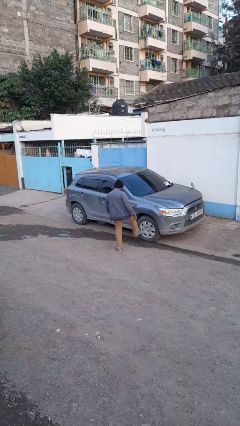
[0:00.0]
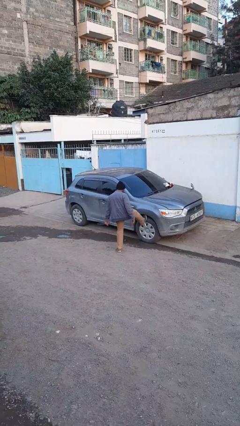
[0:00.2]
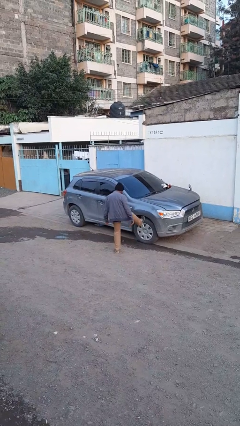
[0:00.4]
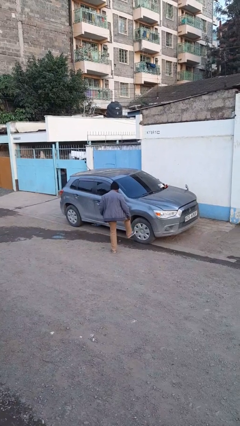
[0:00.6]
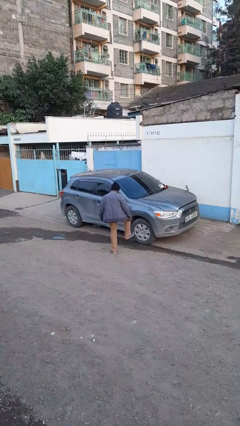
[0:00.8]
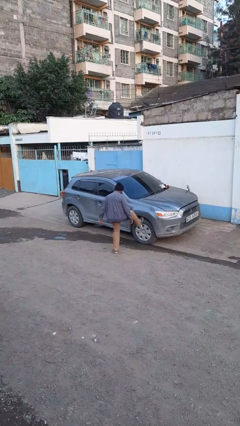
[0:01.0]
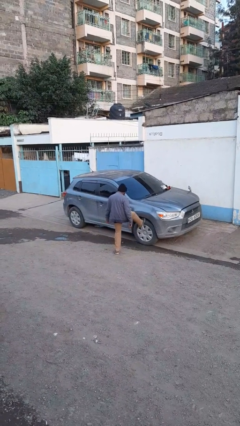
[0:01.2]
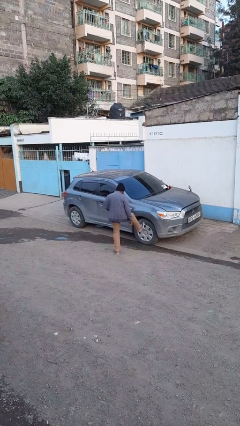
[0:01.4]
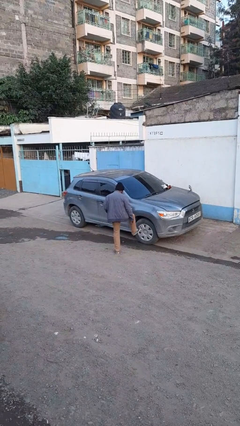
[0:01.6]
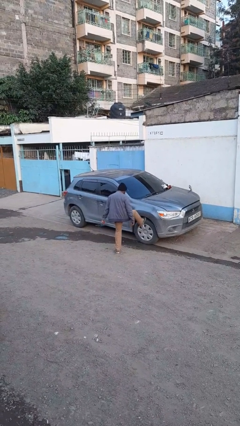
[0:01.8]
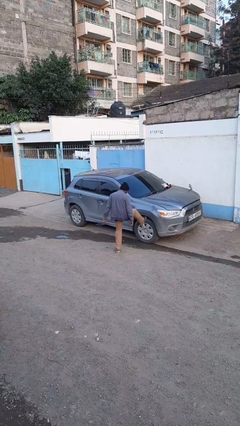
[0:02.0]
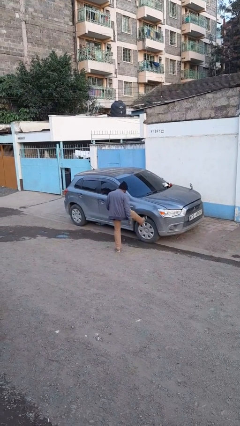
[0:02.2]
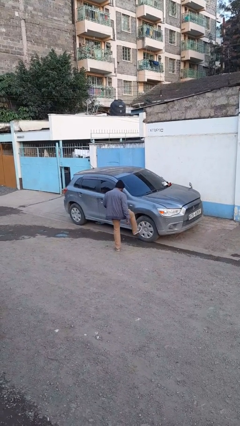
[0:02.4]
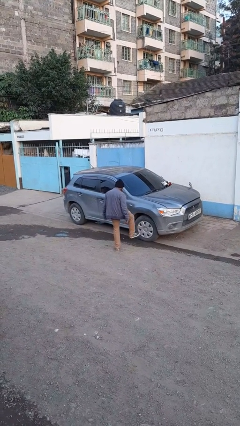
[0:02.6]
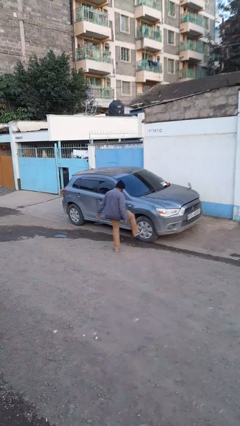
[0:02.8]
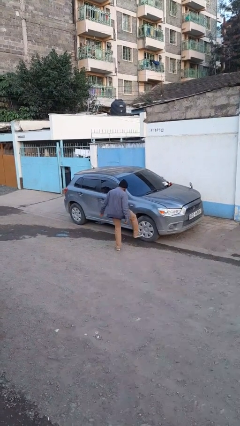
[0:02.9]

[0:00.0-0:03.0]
person kicks car tires

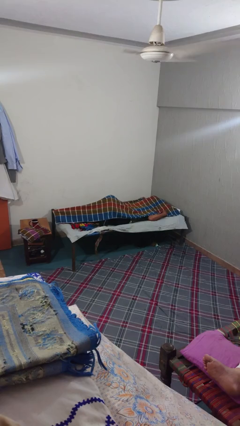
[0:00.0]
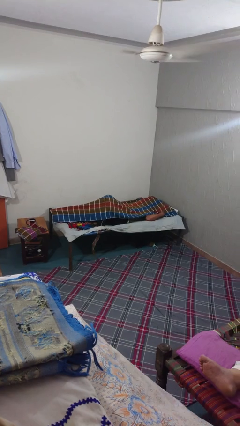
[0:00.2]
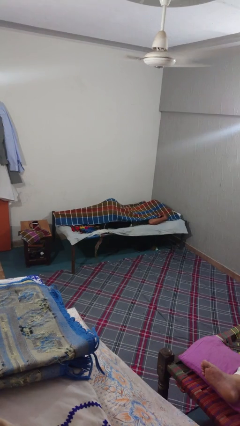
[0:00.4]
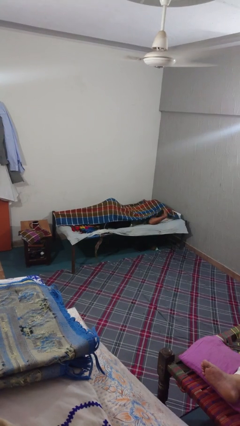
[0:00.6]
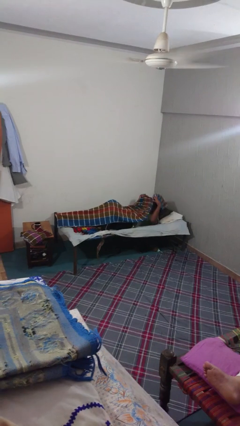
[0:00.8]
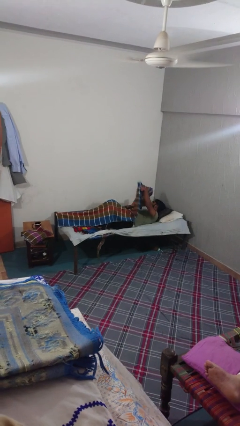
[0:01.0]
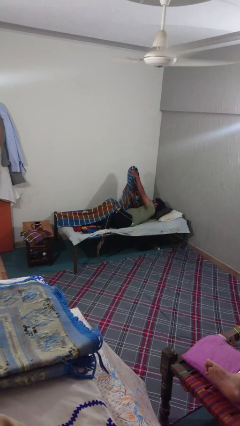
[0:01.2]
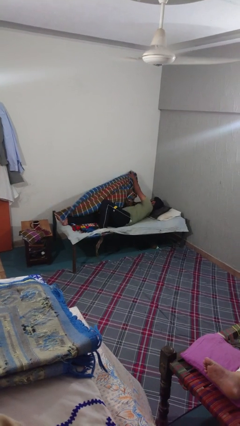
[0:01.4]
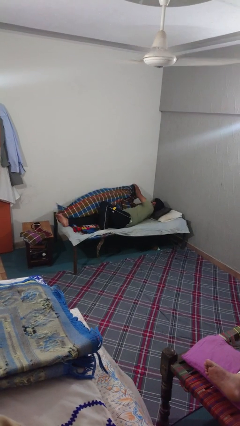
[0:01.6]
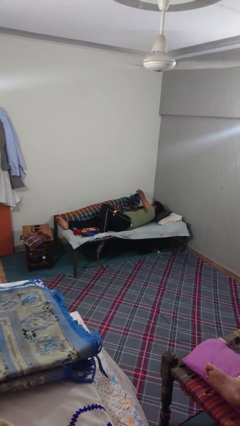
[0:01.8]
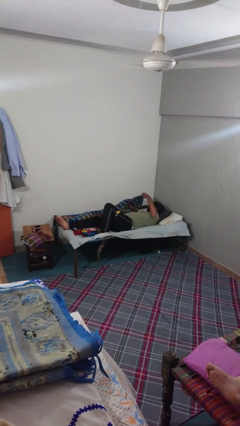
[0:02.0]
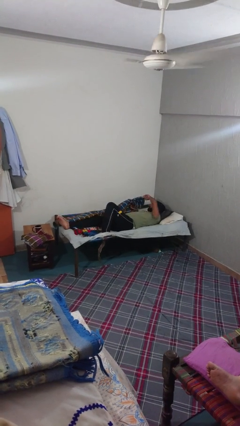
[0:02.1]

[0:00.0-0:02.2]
person uncovers with bedsheets

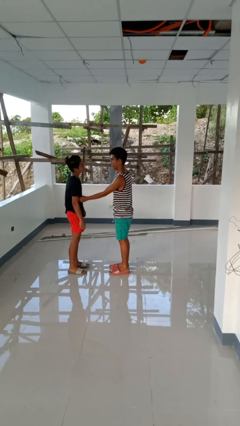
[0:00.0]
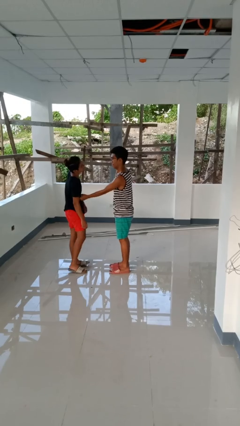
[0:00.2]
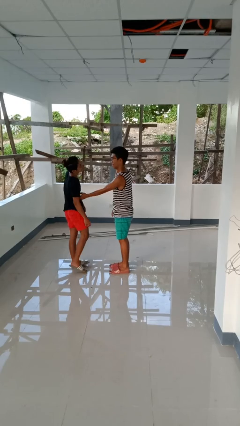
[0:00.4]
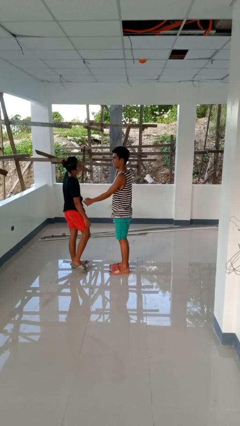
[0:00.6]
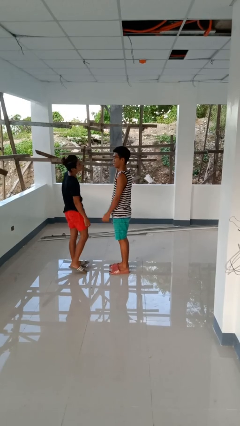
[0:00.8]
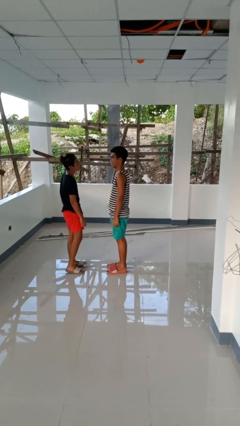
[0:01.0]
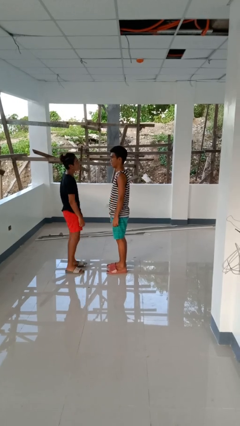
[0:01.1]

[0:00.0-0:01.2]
person tickles person

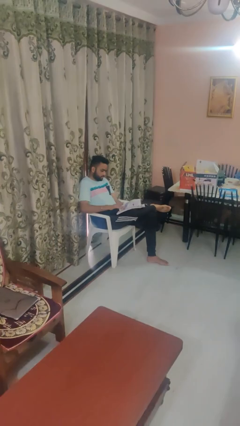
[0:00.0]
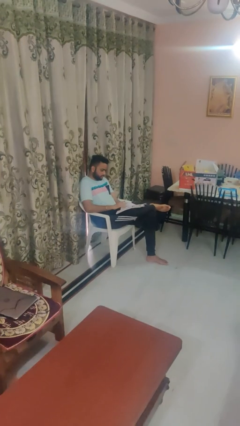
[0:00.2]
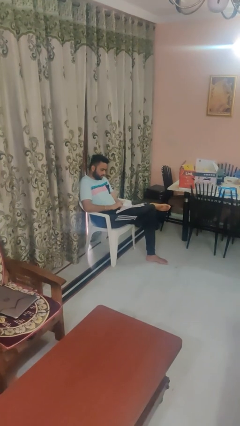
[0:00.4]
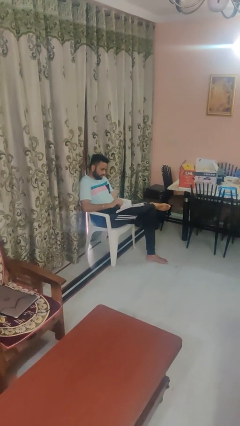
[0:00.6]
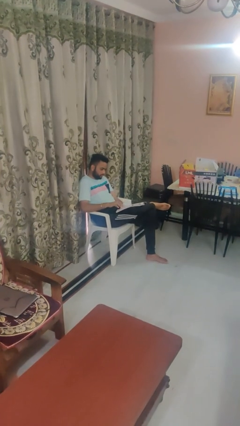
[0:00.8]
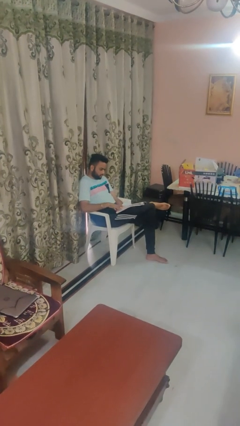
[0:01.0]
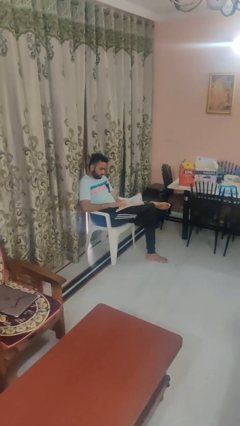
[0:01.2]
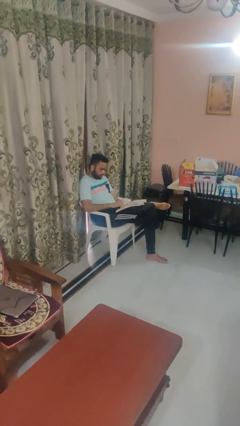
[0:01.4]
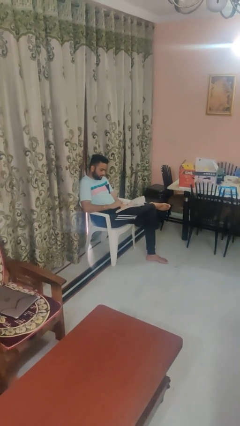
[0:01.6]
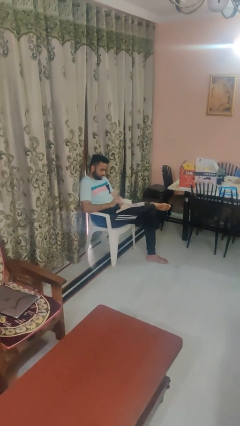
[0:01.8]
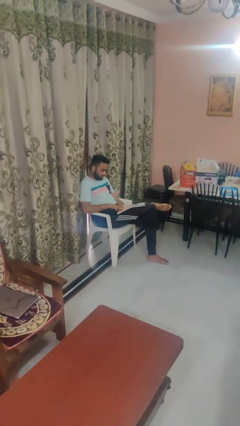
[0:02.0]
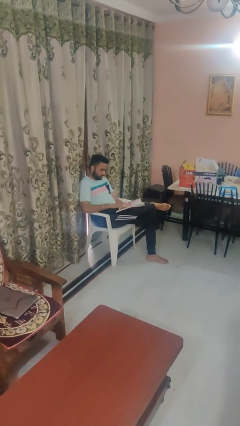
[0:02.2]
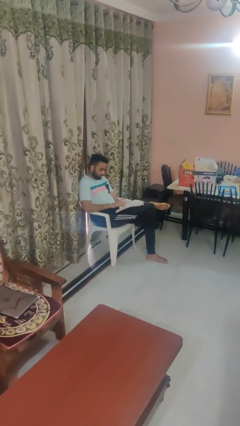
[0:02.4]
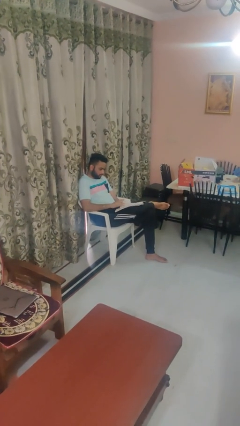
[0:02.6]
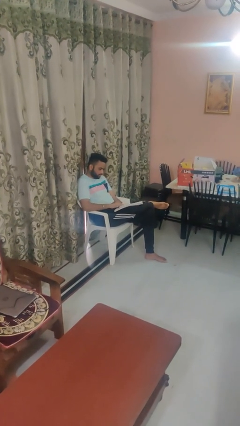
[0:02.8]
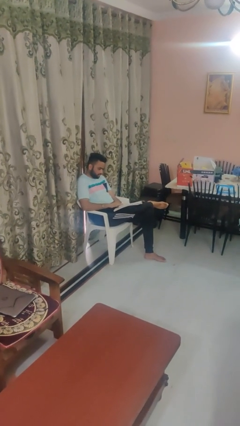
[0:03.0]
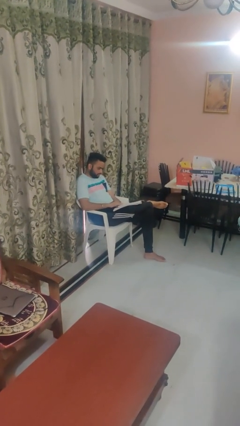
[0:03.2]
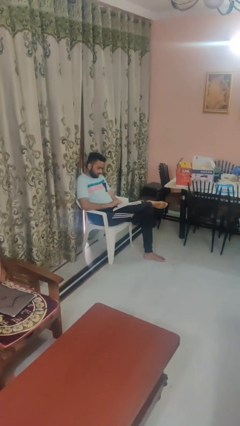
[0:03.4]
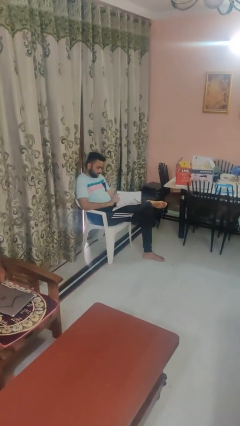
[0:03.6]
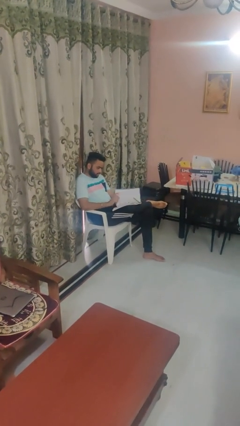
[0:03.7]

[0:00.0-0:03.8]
person reads magazine

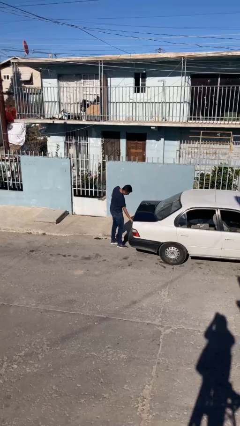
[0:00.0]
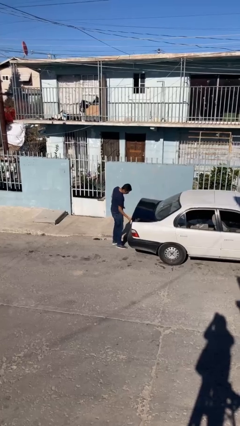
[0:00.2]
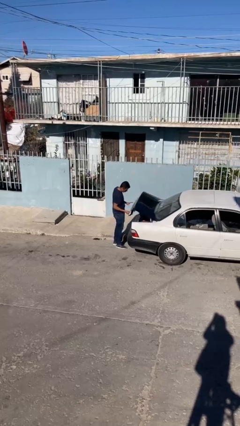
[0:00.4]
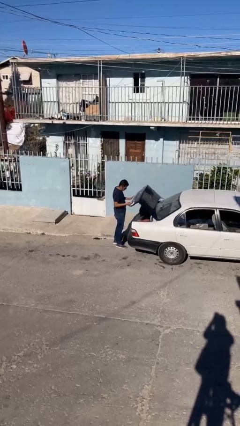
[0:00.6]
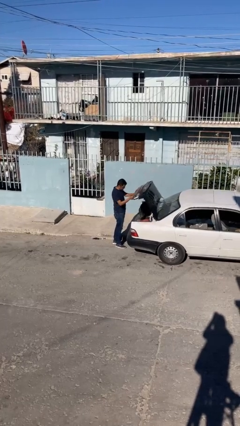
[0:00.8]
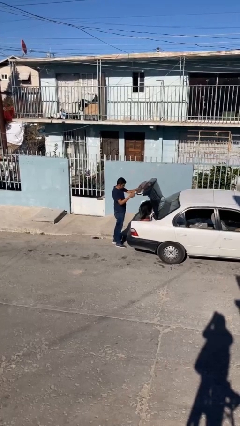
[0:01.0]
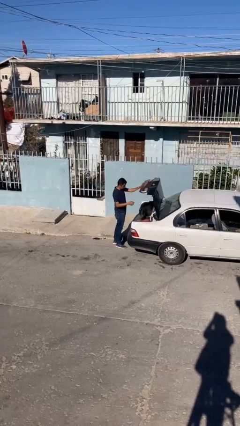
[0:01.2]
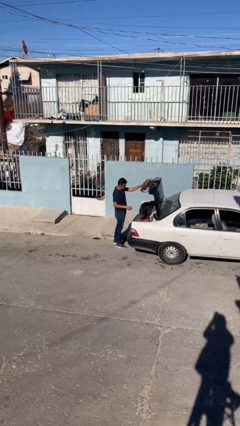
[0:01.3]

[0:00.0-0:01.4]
person opens car trunk

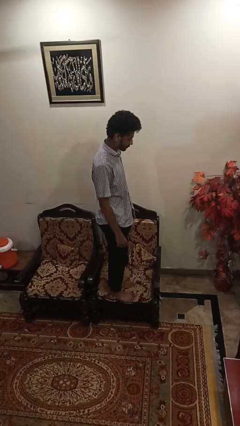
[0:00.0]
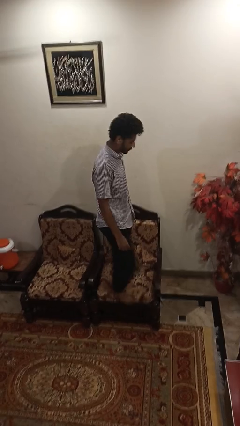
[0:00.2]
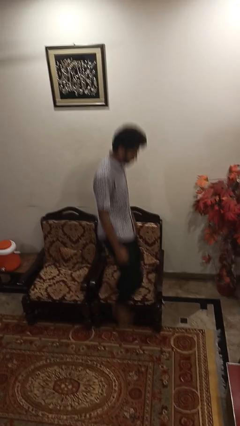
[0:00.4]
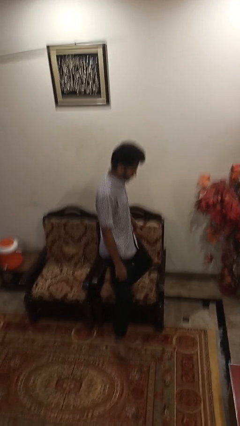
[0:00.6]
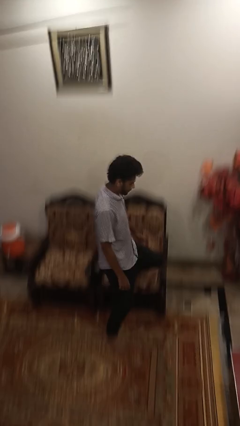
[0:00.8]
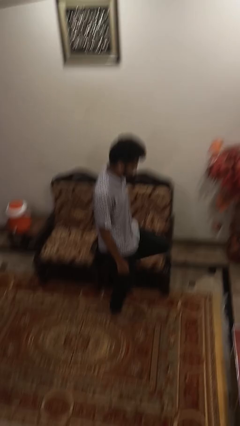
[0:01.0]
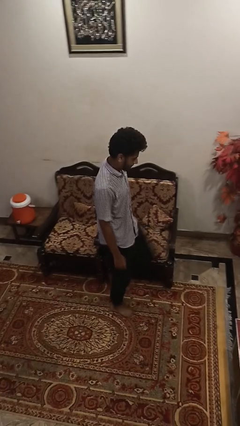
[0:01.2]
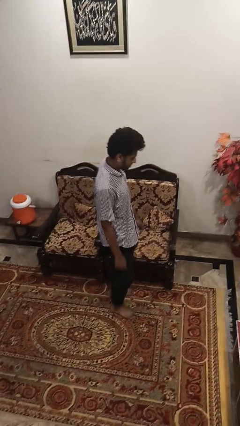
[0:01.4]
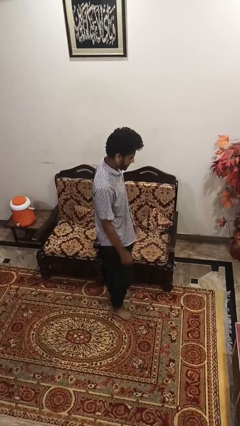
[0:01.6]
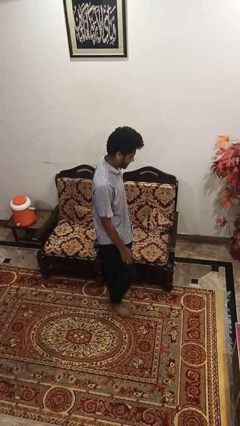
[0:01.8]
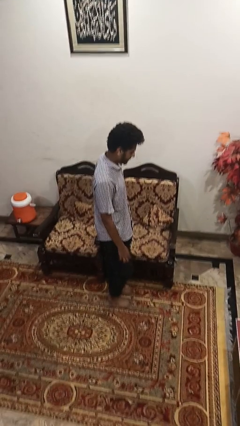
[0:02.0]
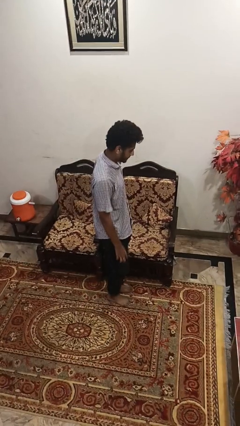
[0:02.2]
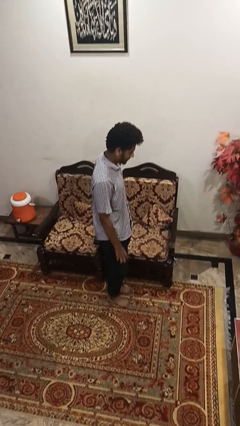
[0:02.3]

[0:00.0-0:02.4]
person climbs off couch

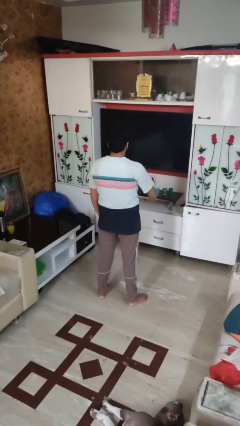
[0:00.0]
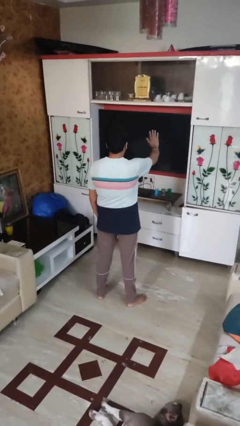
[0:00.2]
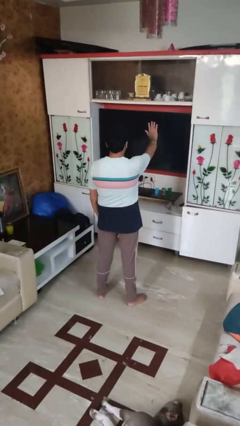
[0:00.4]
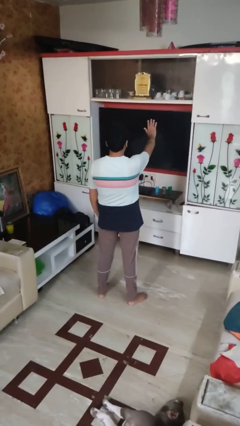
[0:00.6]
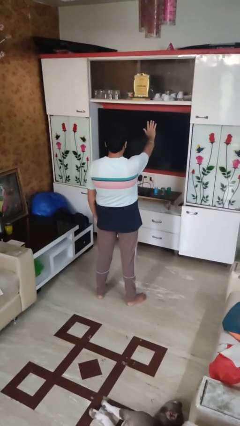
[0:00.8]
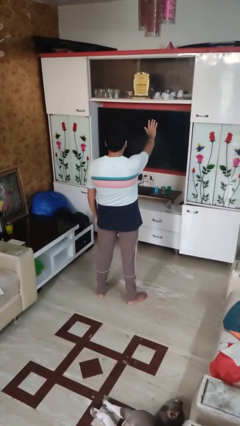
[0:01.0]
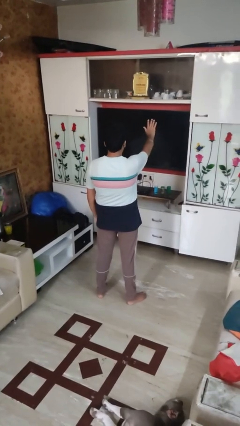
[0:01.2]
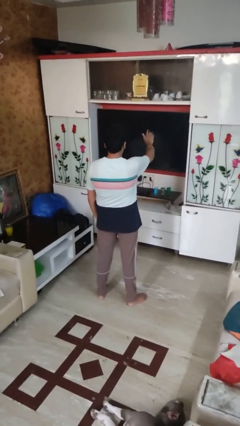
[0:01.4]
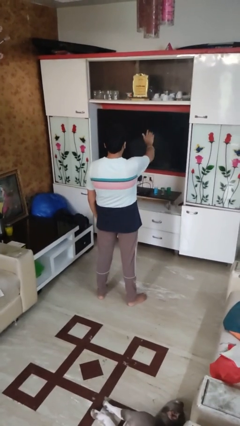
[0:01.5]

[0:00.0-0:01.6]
person gestures stop

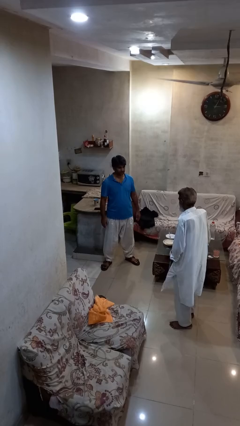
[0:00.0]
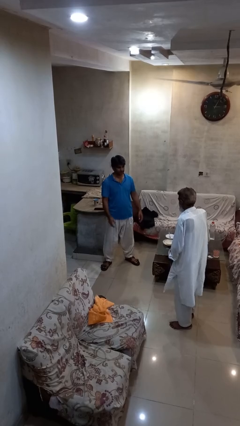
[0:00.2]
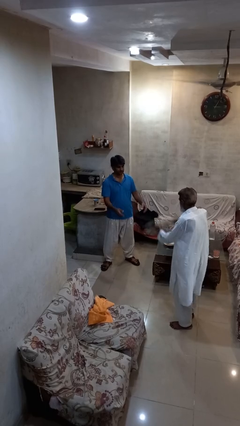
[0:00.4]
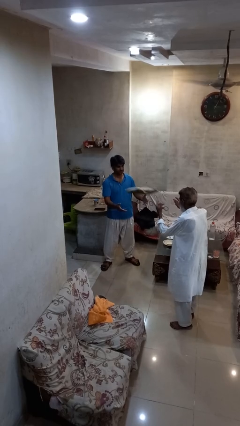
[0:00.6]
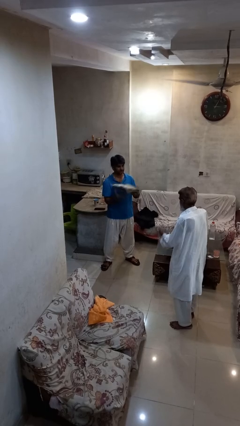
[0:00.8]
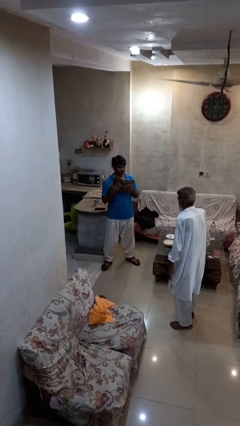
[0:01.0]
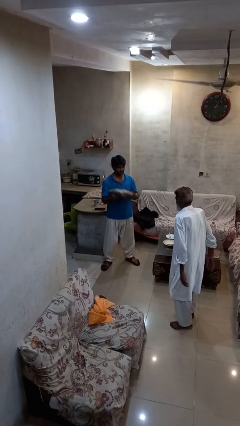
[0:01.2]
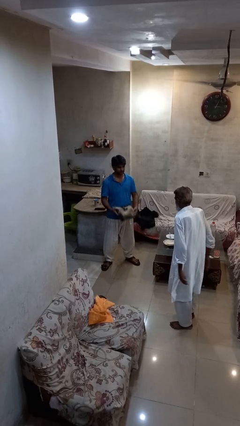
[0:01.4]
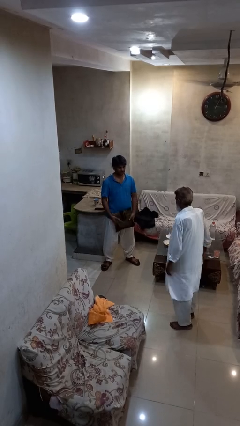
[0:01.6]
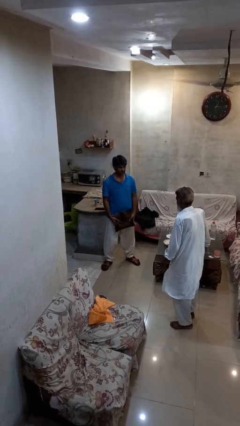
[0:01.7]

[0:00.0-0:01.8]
person catches object from person
